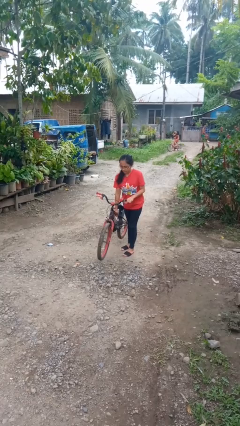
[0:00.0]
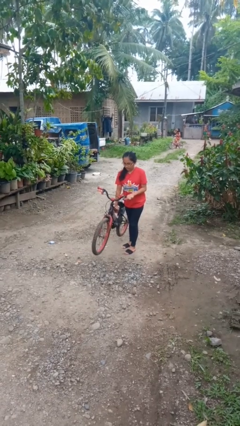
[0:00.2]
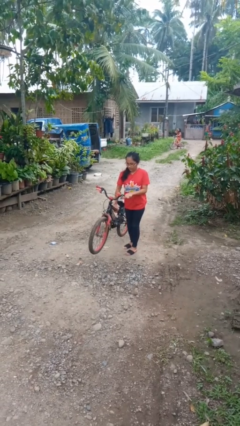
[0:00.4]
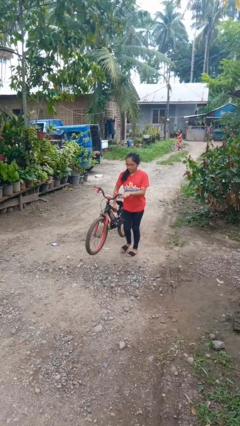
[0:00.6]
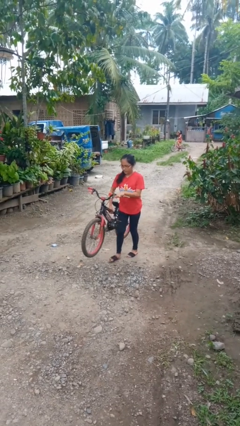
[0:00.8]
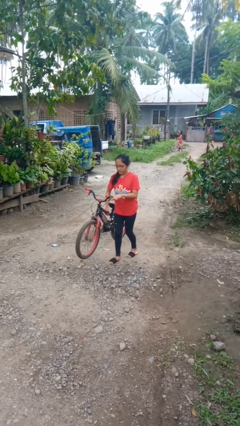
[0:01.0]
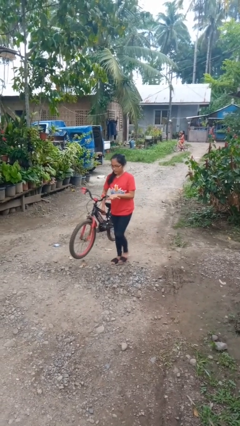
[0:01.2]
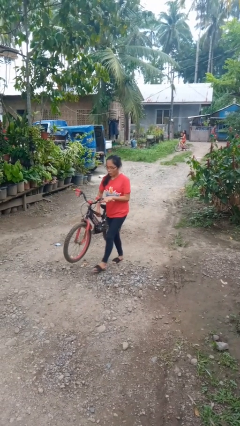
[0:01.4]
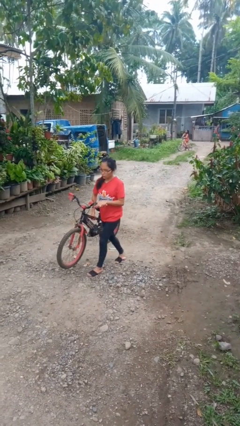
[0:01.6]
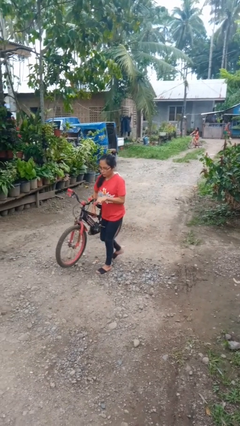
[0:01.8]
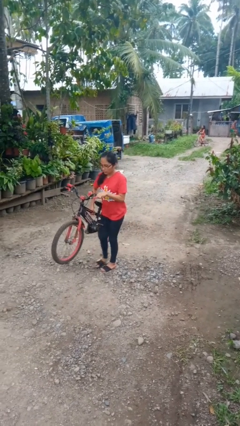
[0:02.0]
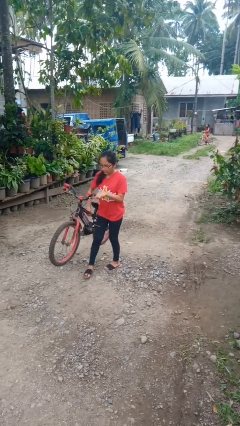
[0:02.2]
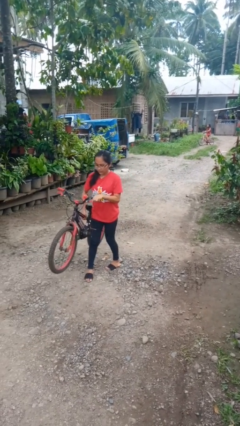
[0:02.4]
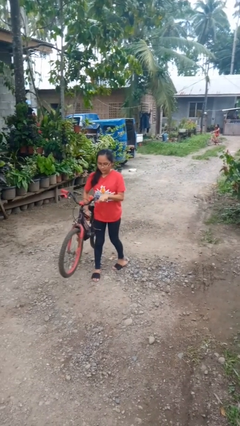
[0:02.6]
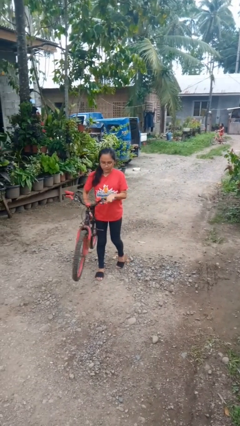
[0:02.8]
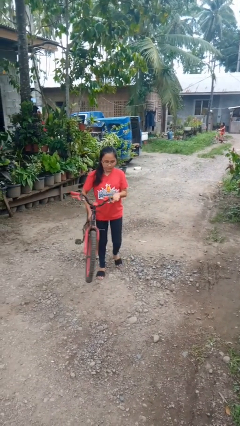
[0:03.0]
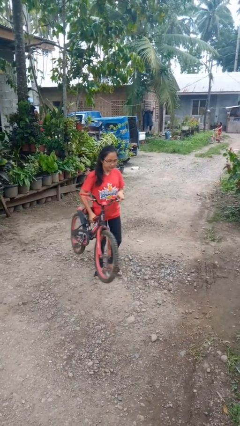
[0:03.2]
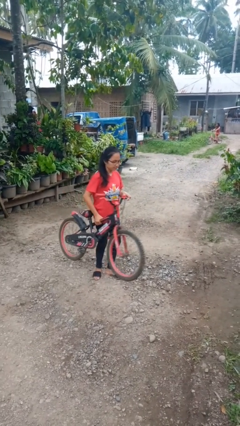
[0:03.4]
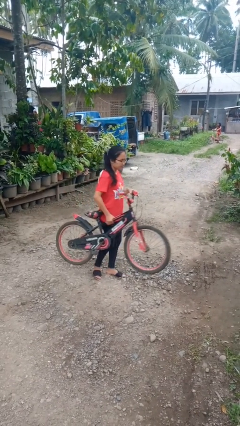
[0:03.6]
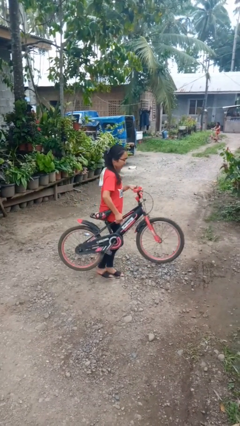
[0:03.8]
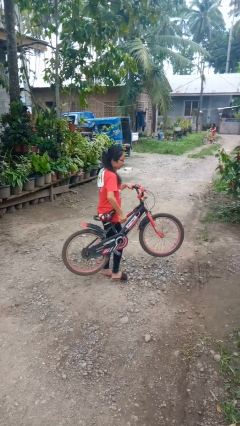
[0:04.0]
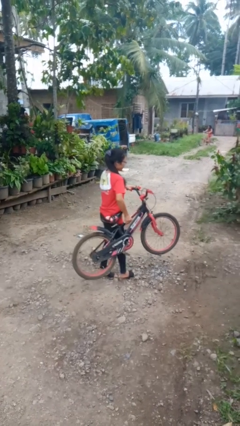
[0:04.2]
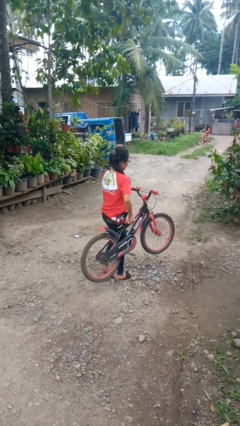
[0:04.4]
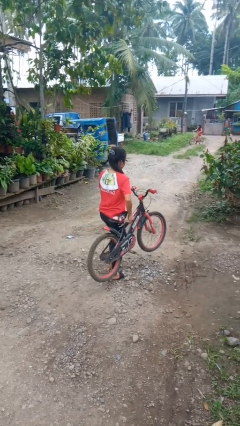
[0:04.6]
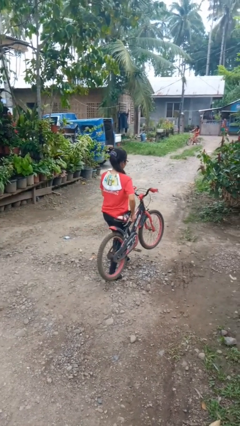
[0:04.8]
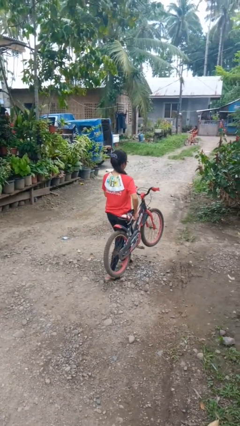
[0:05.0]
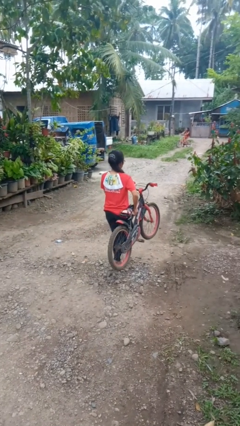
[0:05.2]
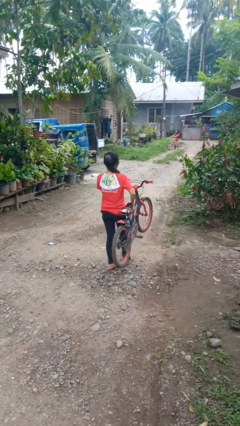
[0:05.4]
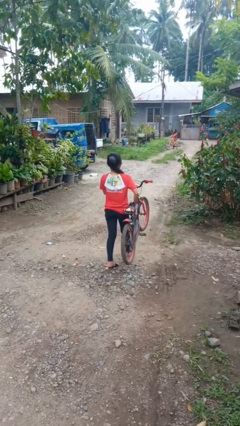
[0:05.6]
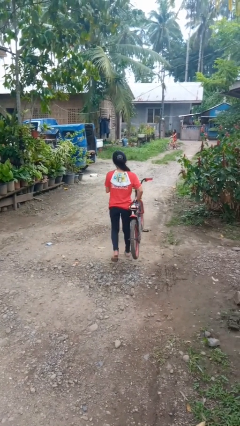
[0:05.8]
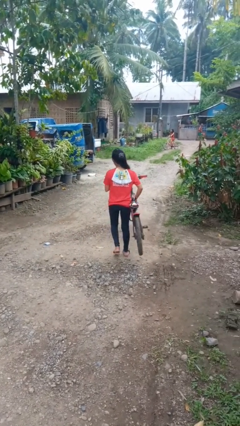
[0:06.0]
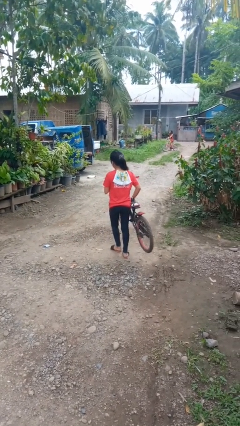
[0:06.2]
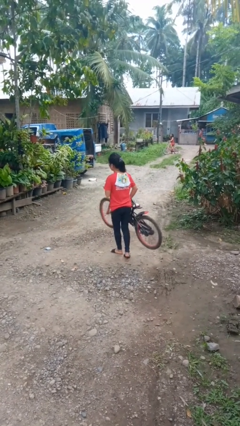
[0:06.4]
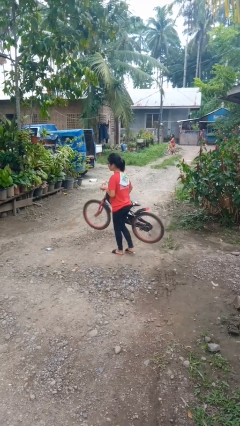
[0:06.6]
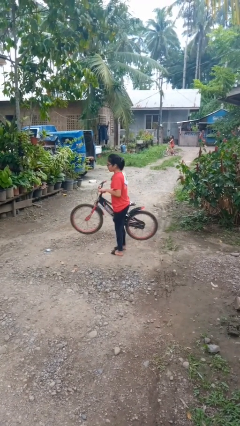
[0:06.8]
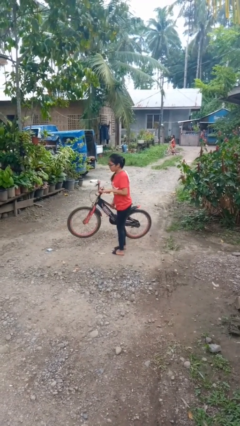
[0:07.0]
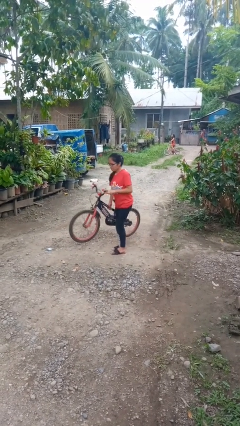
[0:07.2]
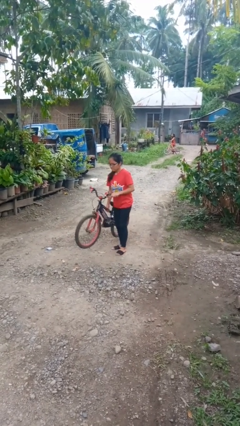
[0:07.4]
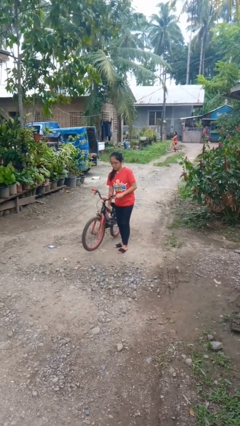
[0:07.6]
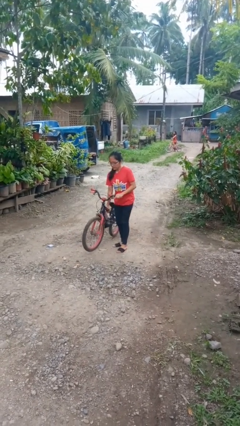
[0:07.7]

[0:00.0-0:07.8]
person carries bicycle

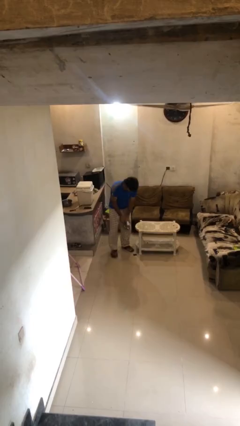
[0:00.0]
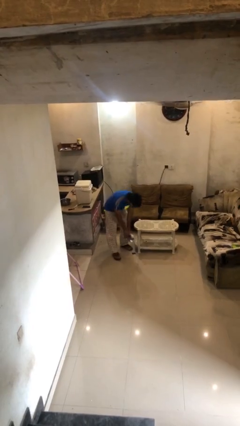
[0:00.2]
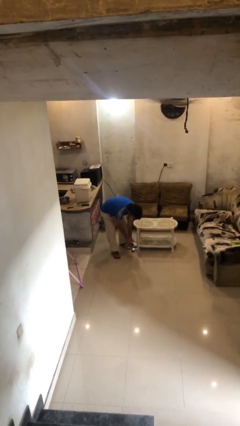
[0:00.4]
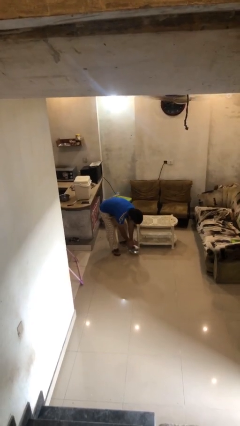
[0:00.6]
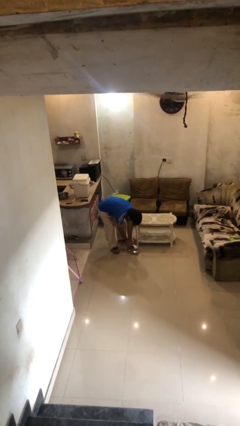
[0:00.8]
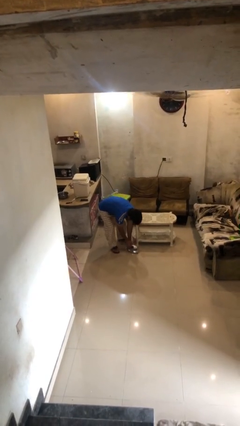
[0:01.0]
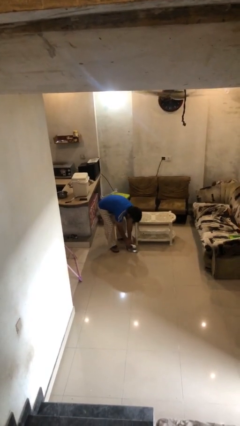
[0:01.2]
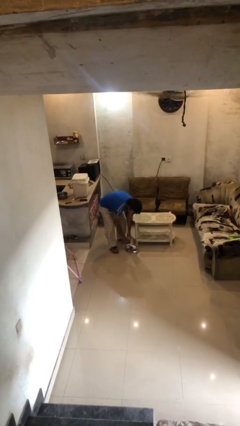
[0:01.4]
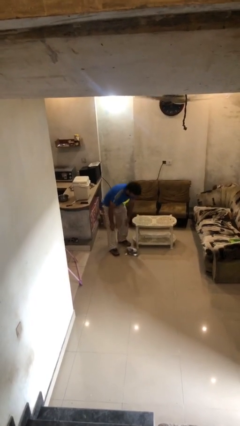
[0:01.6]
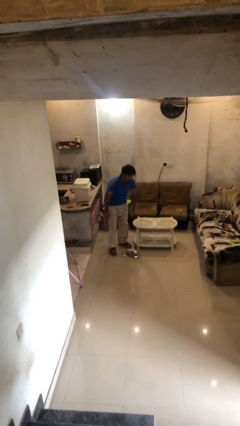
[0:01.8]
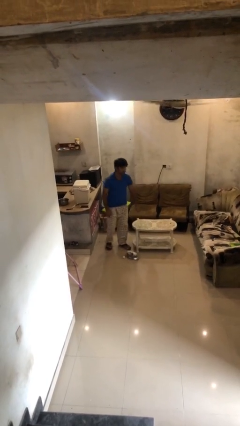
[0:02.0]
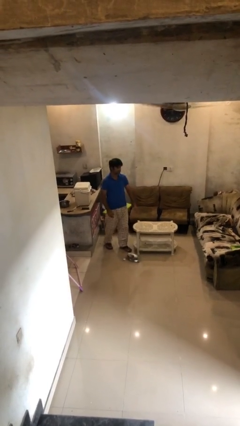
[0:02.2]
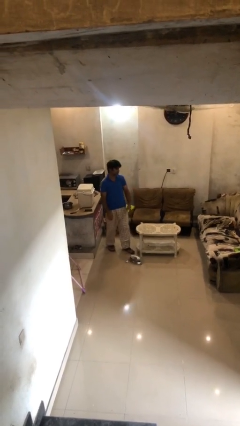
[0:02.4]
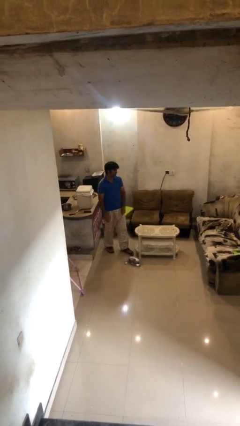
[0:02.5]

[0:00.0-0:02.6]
person puts down object on floor

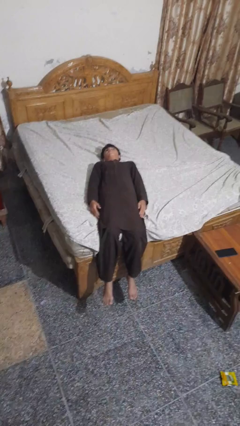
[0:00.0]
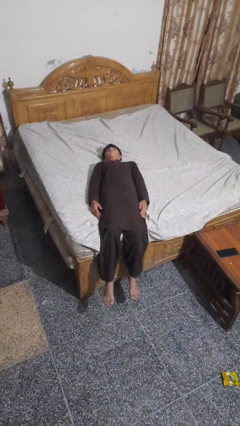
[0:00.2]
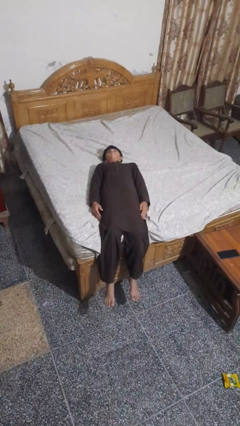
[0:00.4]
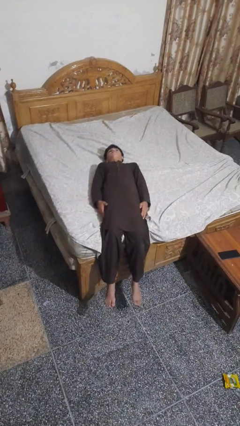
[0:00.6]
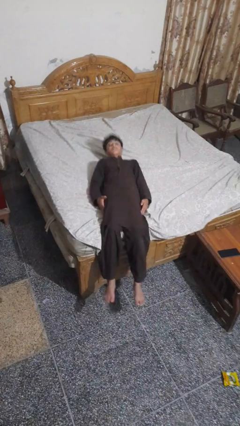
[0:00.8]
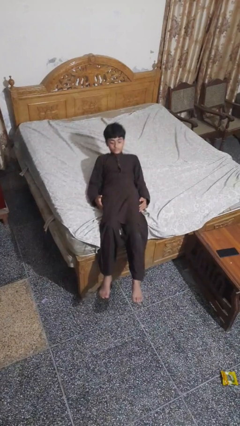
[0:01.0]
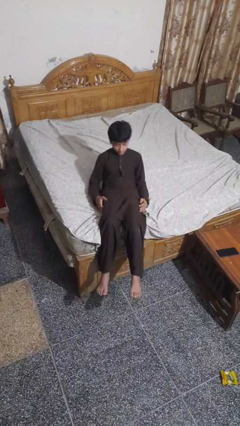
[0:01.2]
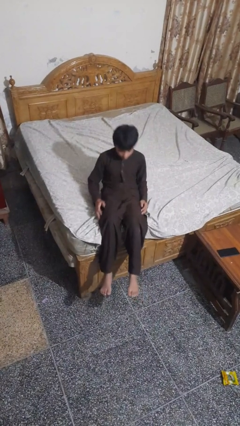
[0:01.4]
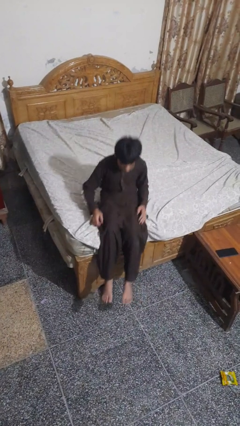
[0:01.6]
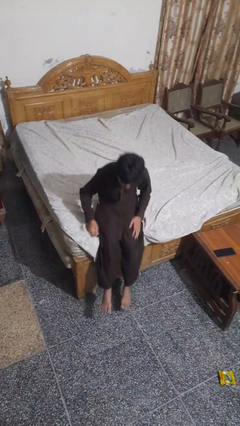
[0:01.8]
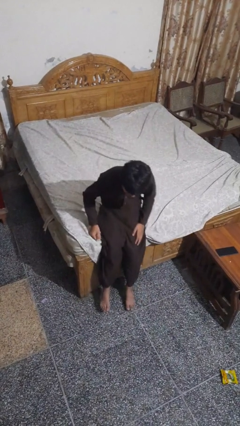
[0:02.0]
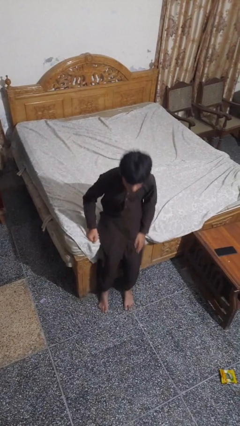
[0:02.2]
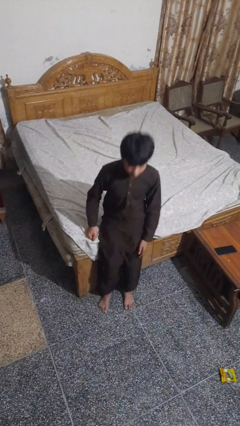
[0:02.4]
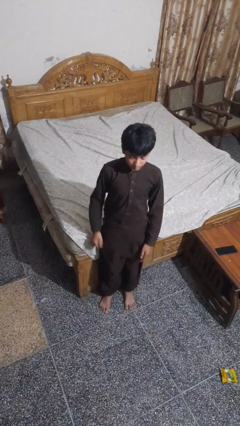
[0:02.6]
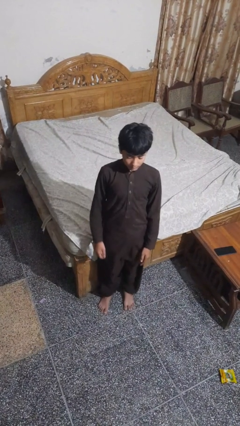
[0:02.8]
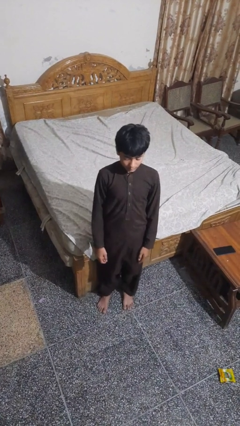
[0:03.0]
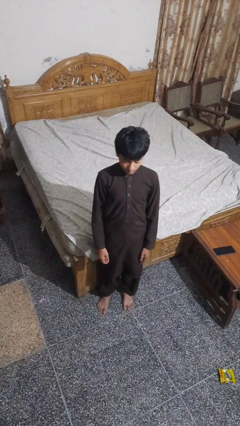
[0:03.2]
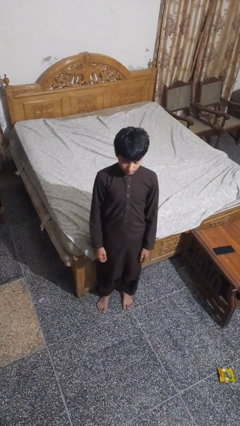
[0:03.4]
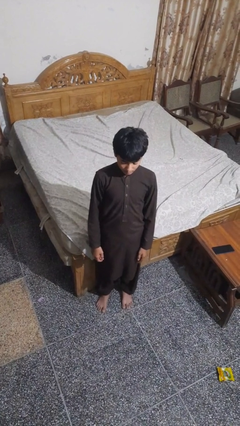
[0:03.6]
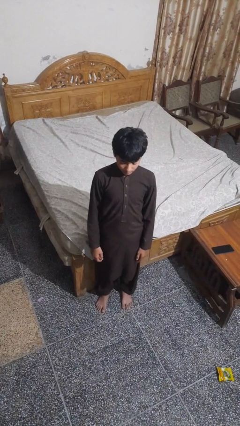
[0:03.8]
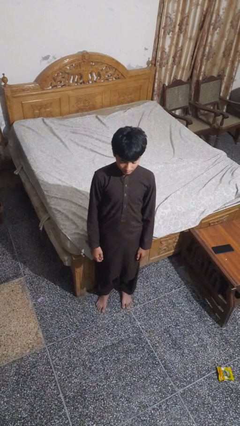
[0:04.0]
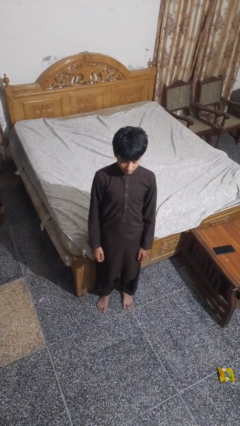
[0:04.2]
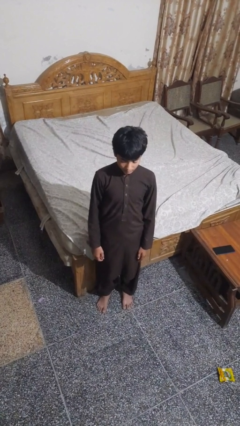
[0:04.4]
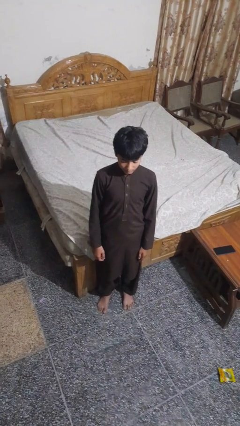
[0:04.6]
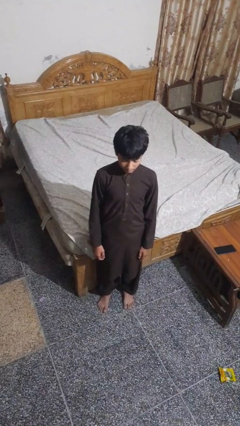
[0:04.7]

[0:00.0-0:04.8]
person stands up

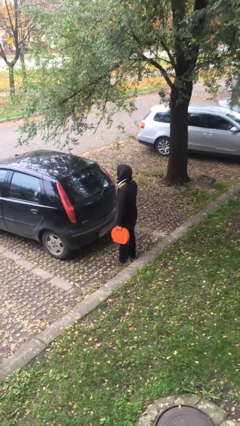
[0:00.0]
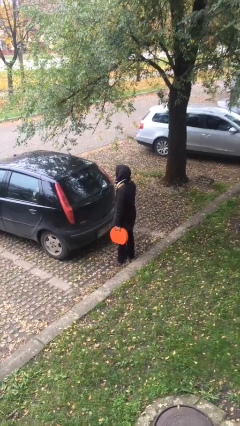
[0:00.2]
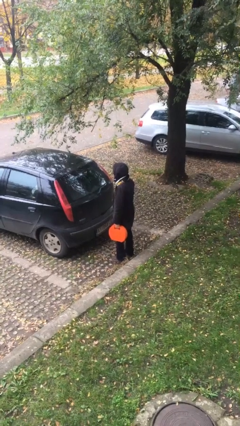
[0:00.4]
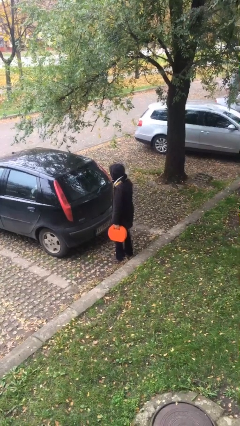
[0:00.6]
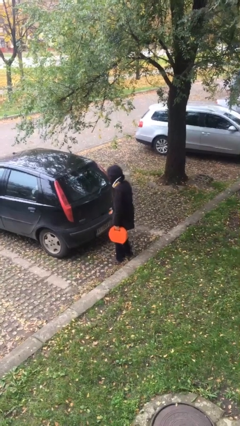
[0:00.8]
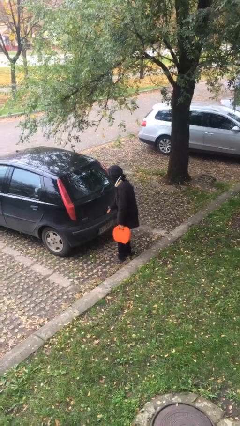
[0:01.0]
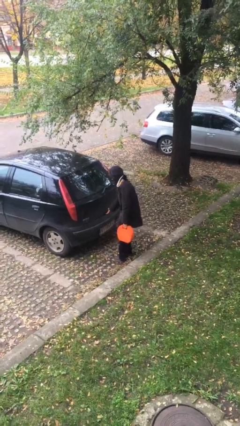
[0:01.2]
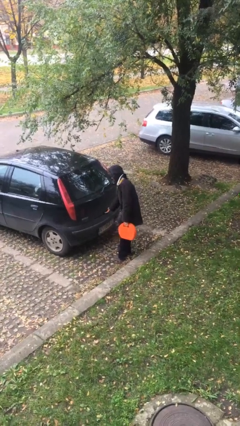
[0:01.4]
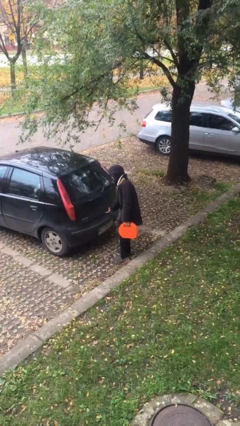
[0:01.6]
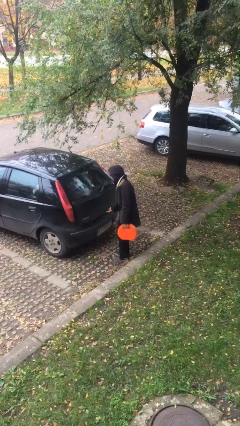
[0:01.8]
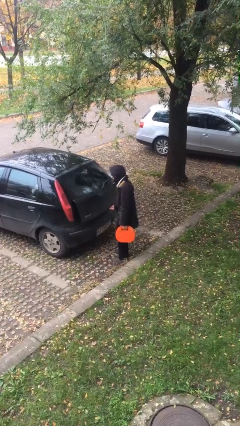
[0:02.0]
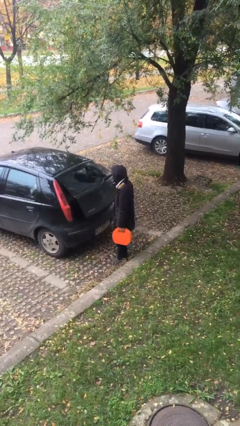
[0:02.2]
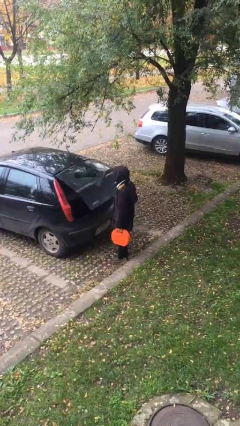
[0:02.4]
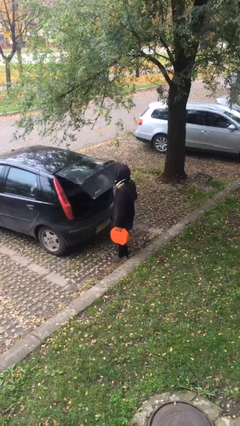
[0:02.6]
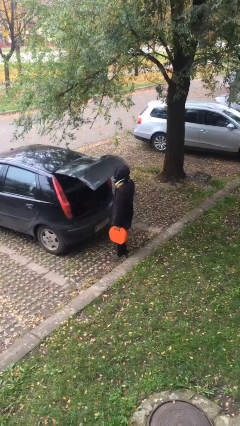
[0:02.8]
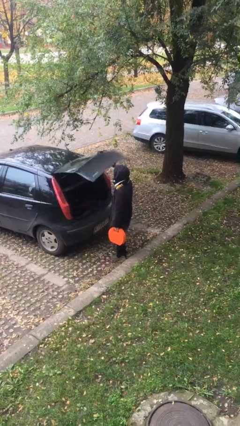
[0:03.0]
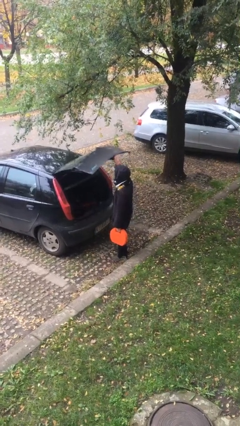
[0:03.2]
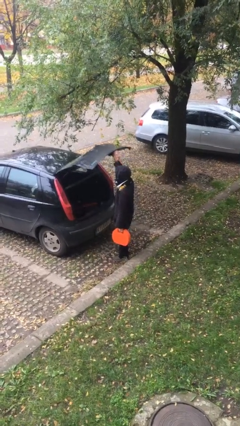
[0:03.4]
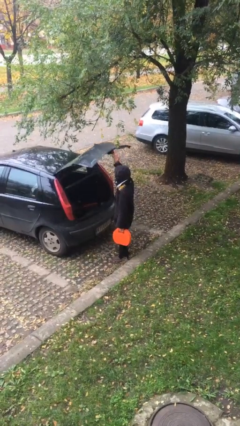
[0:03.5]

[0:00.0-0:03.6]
person opens car trunk
